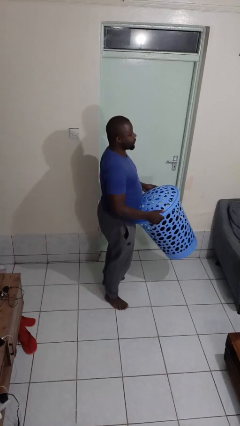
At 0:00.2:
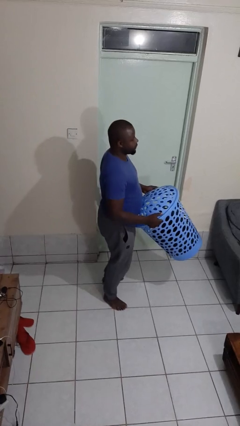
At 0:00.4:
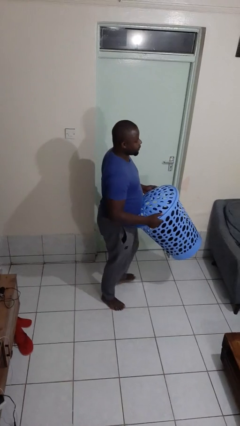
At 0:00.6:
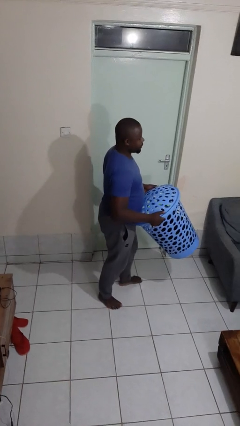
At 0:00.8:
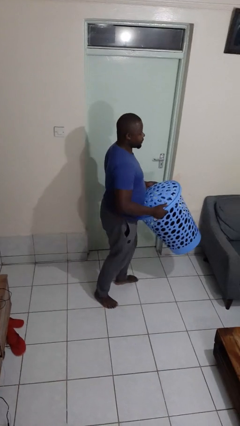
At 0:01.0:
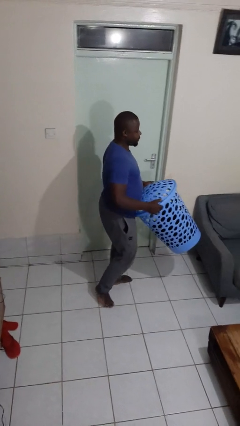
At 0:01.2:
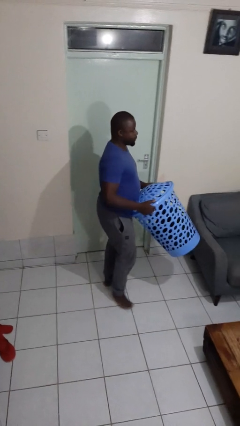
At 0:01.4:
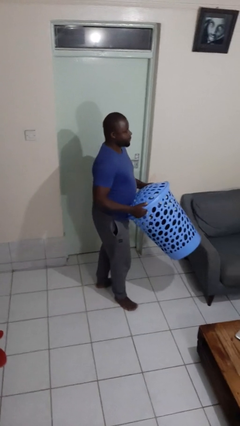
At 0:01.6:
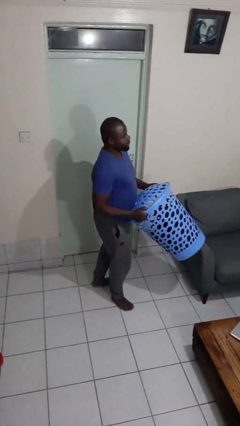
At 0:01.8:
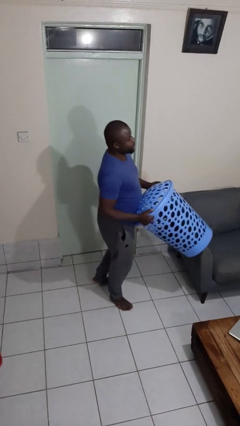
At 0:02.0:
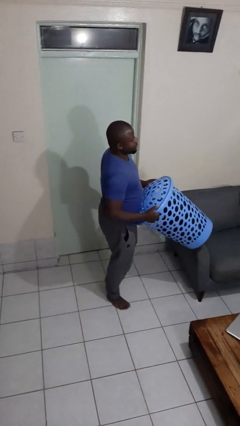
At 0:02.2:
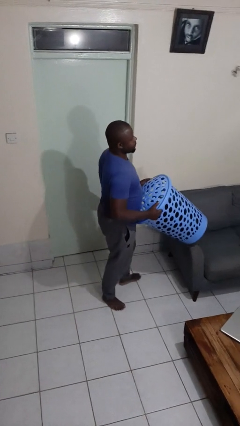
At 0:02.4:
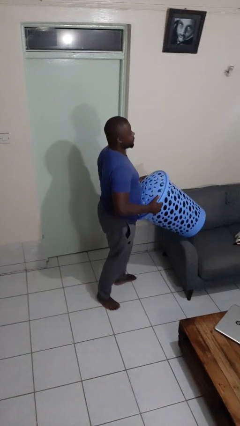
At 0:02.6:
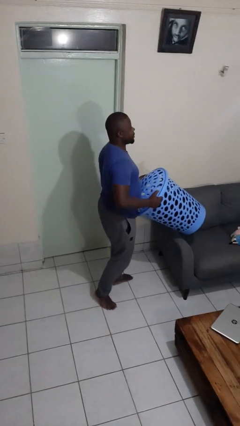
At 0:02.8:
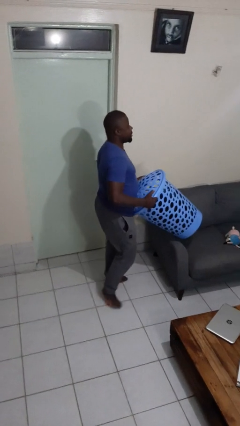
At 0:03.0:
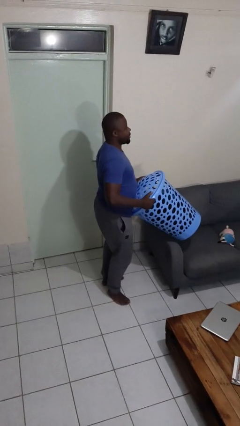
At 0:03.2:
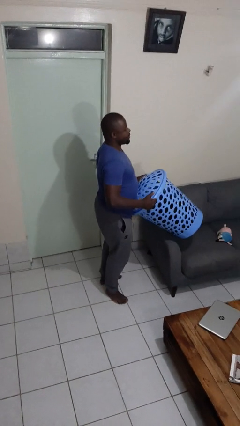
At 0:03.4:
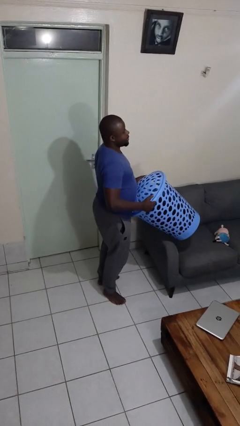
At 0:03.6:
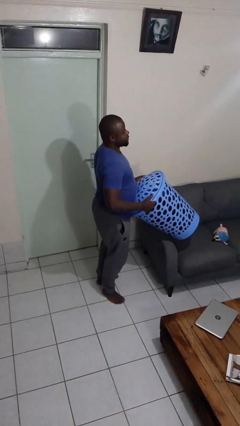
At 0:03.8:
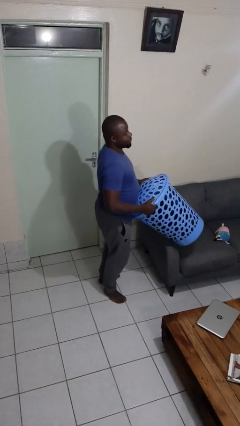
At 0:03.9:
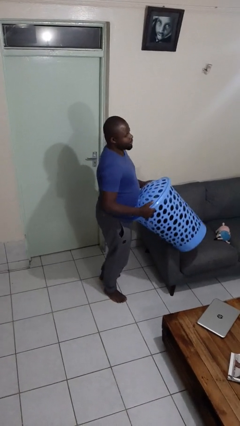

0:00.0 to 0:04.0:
person carries laundry basket

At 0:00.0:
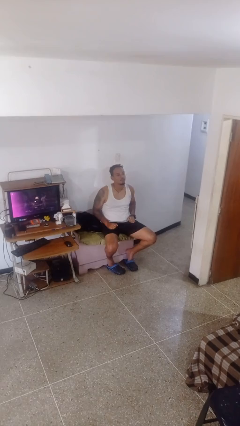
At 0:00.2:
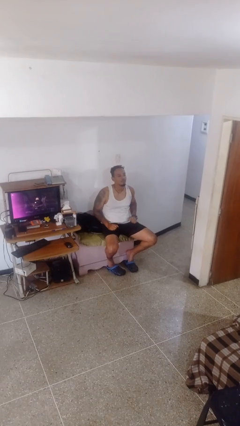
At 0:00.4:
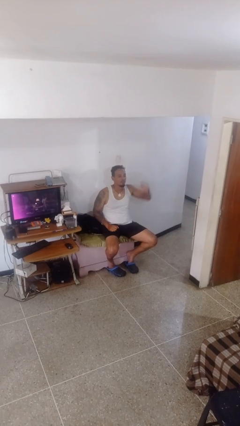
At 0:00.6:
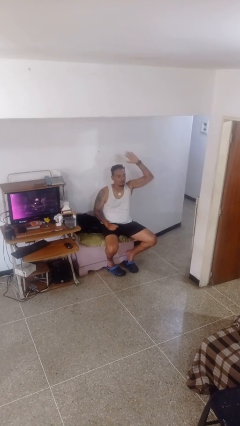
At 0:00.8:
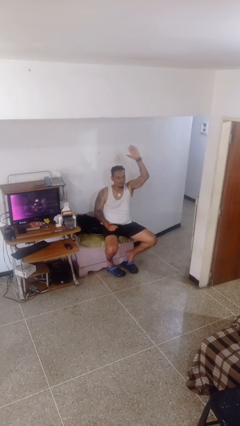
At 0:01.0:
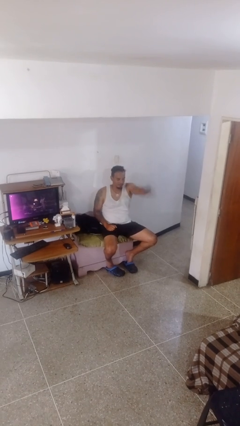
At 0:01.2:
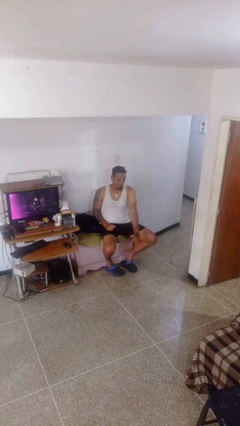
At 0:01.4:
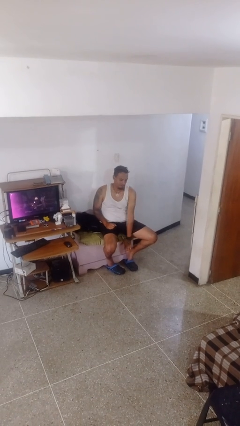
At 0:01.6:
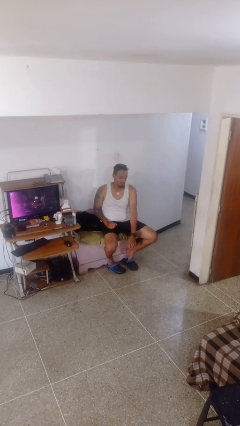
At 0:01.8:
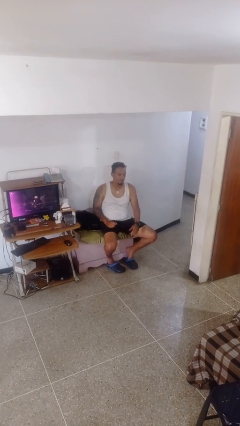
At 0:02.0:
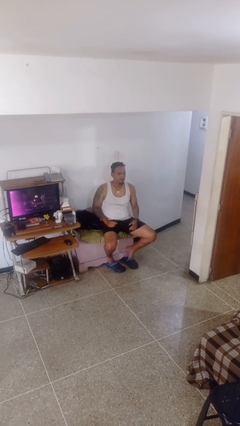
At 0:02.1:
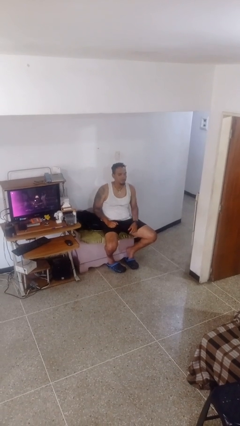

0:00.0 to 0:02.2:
person gestures swipe down

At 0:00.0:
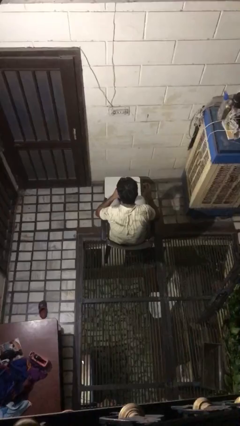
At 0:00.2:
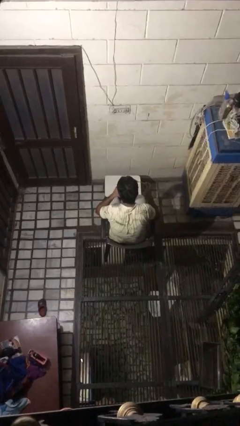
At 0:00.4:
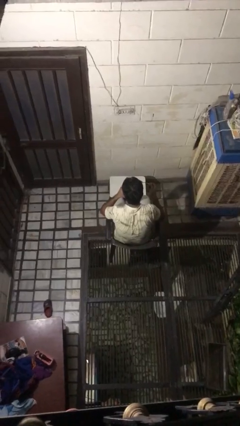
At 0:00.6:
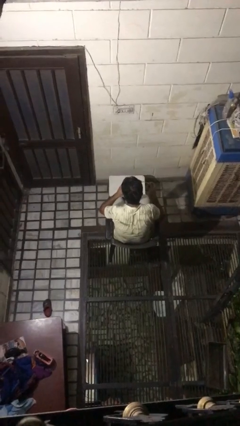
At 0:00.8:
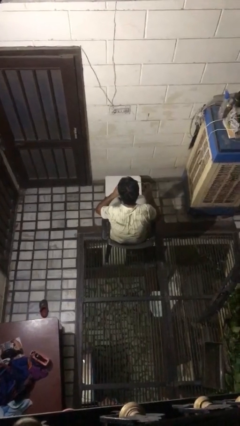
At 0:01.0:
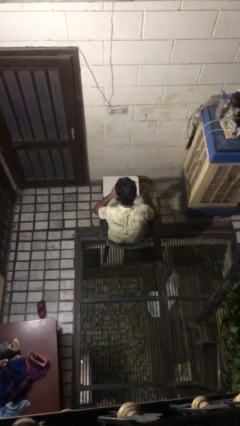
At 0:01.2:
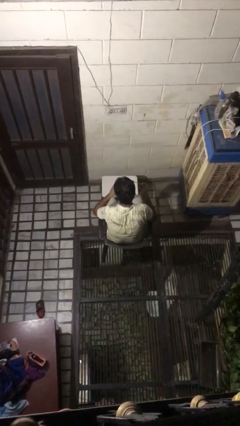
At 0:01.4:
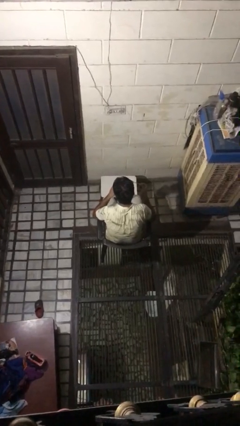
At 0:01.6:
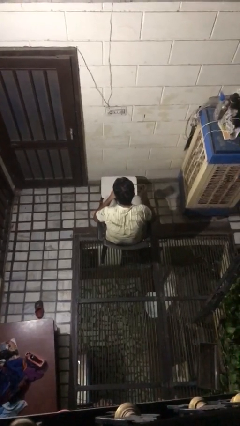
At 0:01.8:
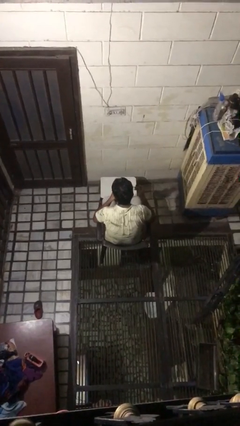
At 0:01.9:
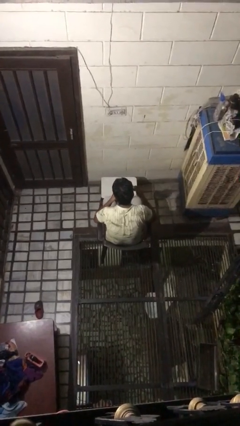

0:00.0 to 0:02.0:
person drinks from mug

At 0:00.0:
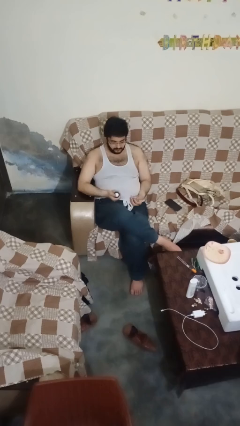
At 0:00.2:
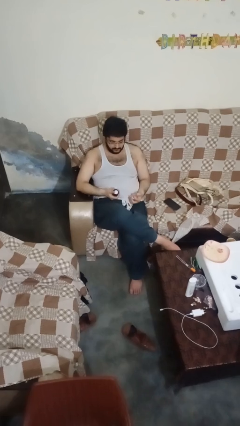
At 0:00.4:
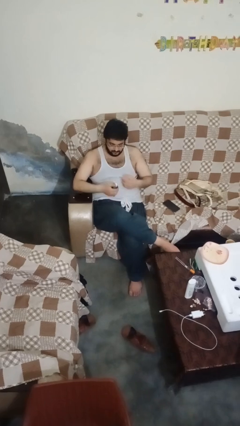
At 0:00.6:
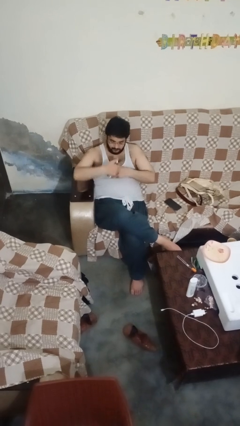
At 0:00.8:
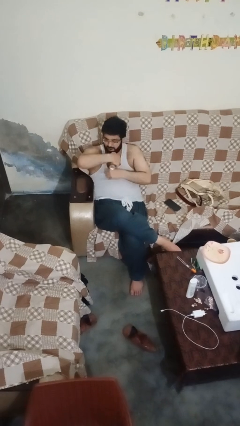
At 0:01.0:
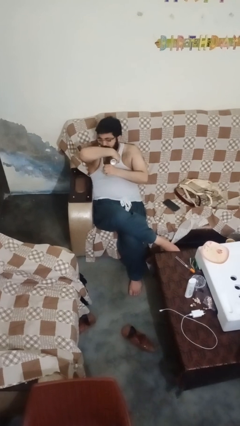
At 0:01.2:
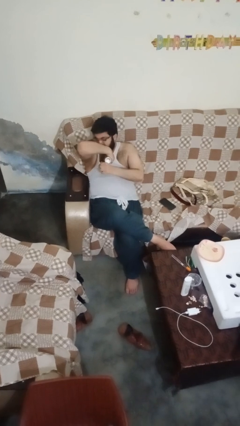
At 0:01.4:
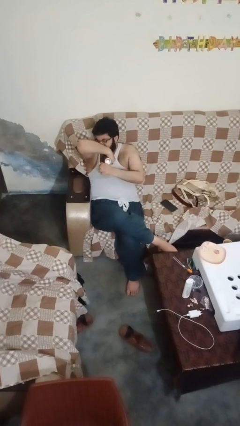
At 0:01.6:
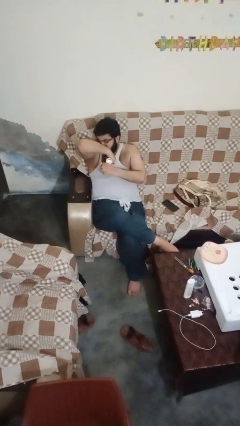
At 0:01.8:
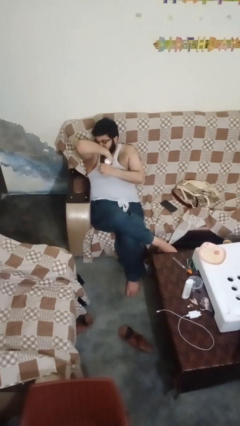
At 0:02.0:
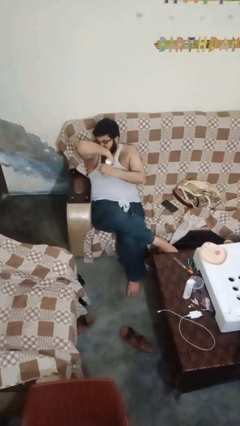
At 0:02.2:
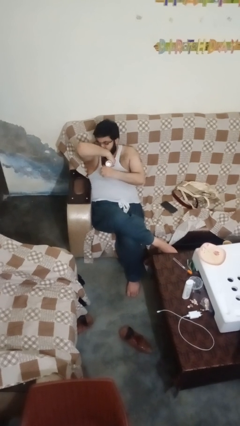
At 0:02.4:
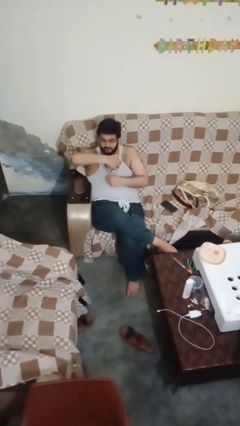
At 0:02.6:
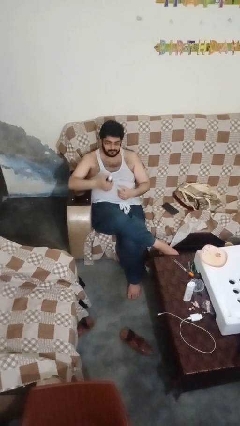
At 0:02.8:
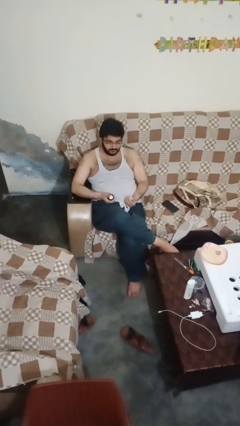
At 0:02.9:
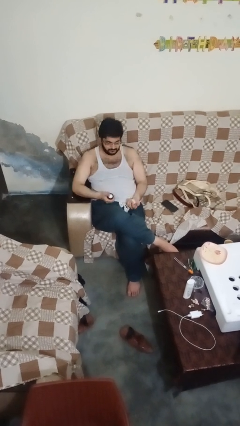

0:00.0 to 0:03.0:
person applies deodorant

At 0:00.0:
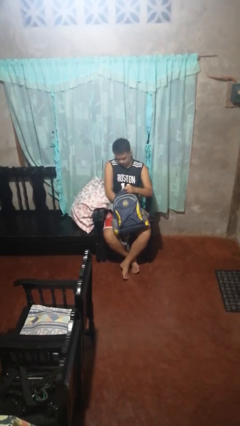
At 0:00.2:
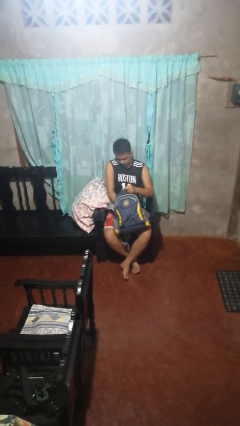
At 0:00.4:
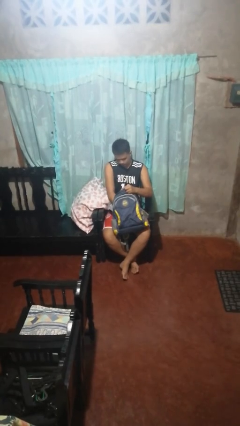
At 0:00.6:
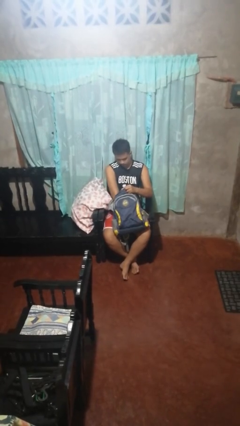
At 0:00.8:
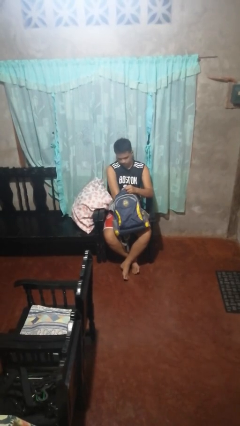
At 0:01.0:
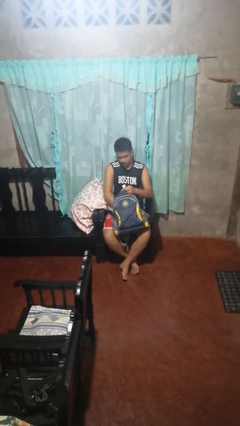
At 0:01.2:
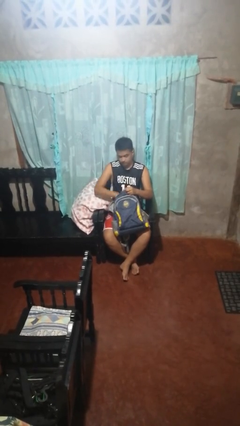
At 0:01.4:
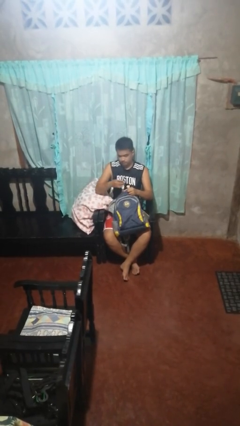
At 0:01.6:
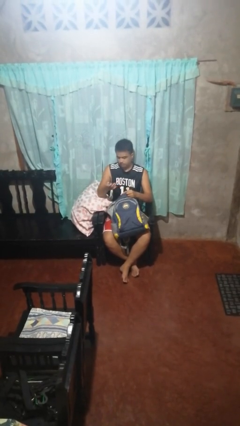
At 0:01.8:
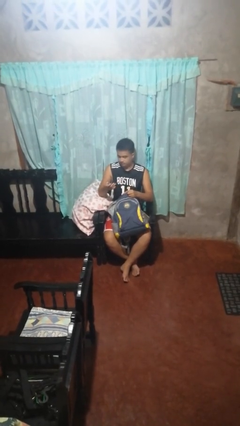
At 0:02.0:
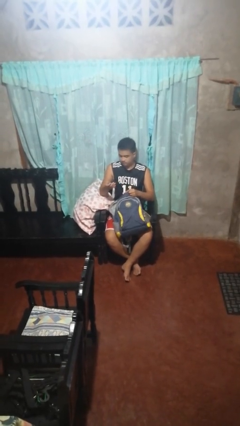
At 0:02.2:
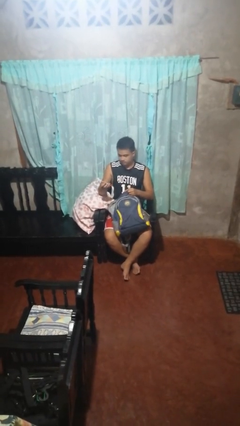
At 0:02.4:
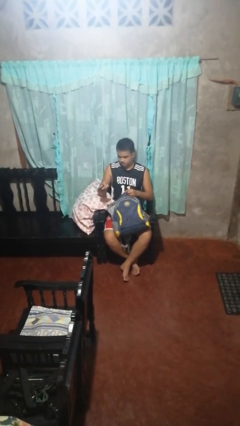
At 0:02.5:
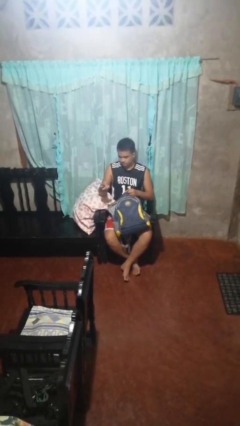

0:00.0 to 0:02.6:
person takes object from backpack

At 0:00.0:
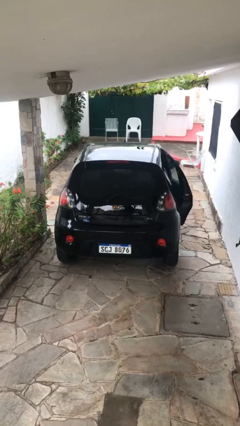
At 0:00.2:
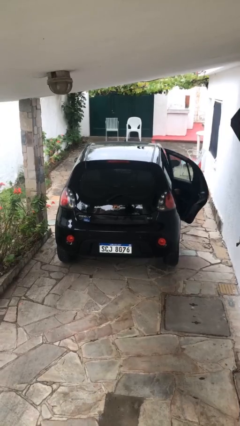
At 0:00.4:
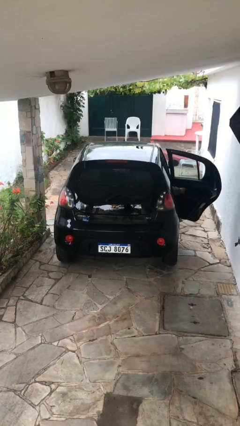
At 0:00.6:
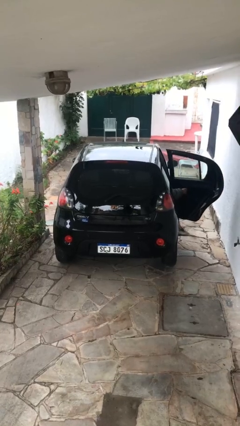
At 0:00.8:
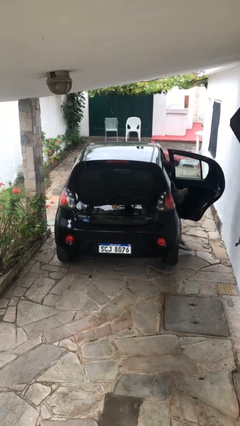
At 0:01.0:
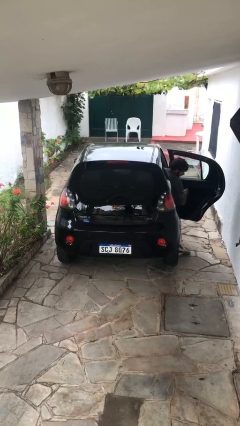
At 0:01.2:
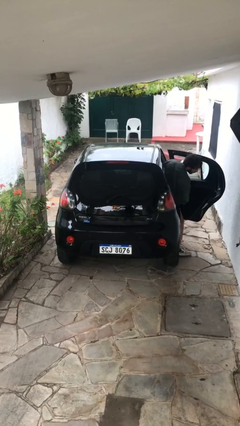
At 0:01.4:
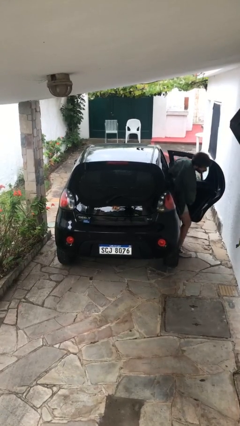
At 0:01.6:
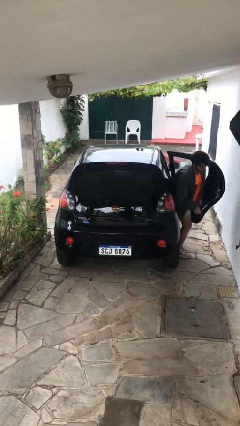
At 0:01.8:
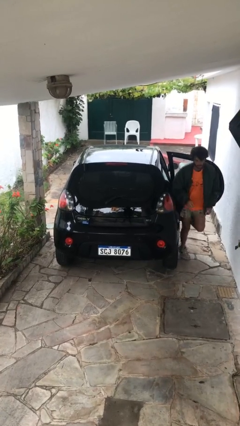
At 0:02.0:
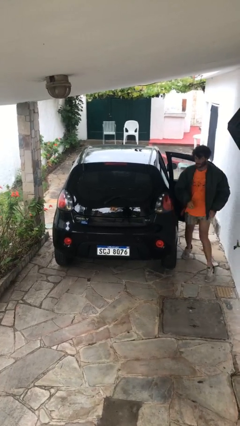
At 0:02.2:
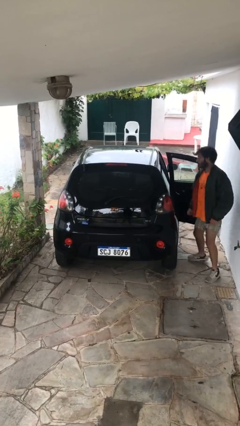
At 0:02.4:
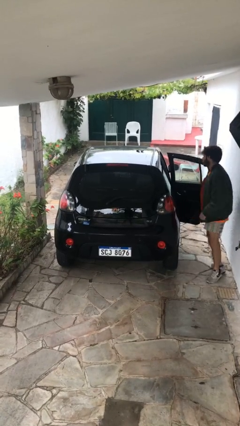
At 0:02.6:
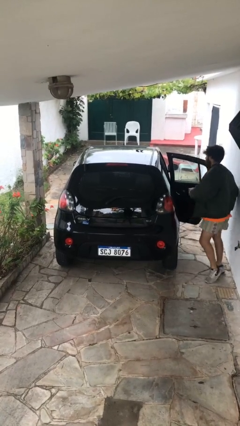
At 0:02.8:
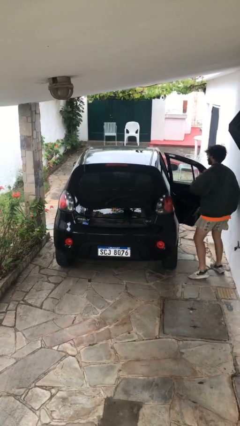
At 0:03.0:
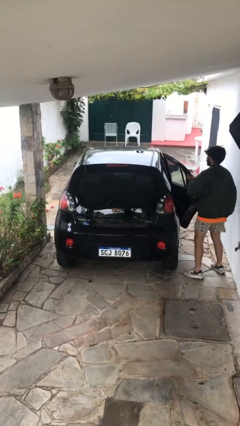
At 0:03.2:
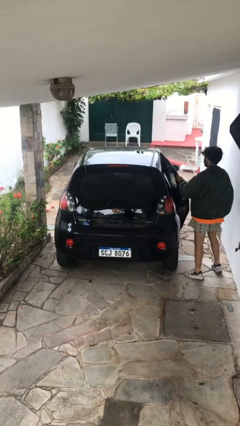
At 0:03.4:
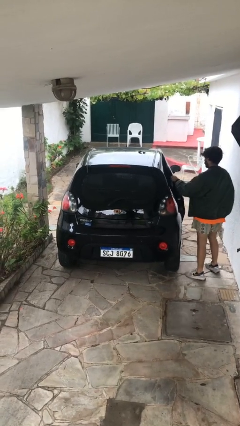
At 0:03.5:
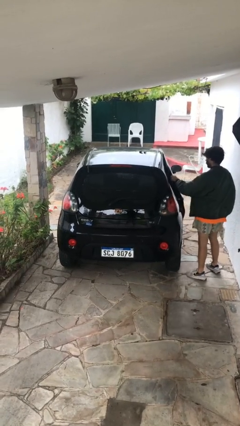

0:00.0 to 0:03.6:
car drops off person
